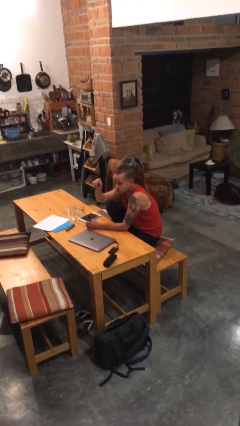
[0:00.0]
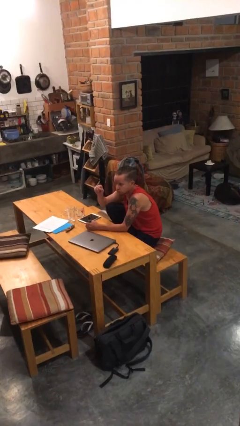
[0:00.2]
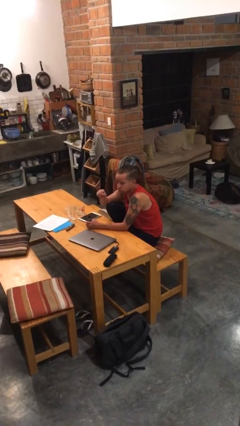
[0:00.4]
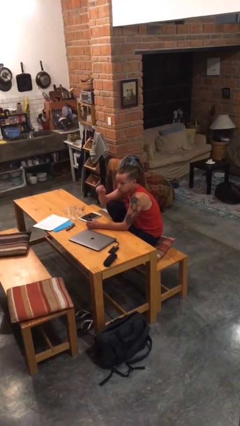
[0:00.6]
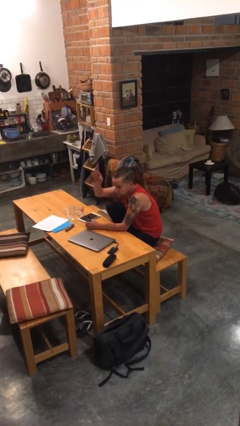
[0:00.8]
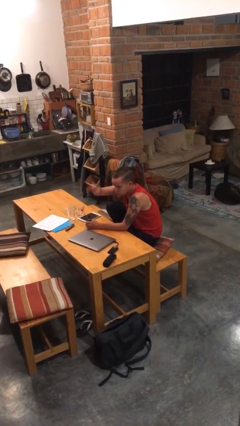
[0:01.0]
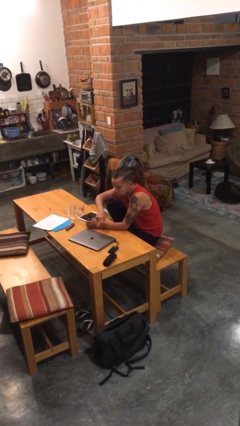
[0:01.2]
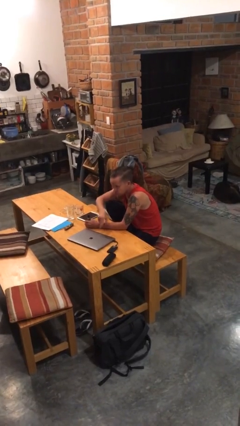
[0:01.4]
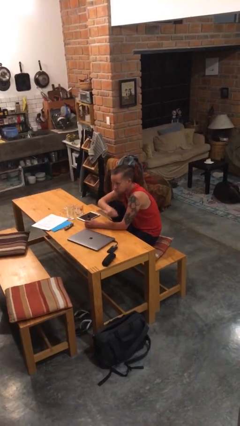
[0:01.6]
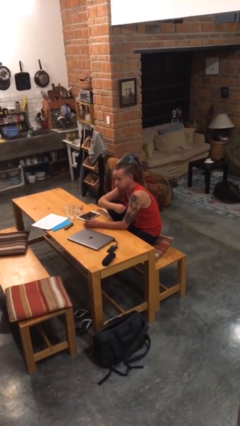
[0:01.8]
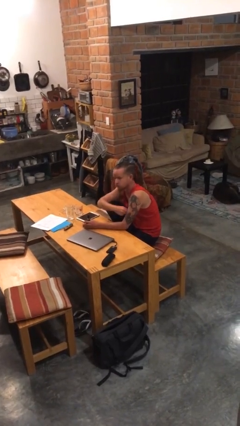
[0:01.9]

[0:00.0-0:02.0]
person gestures swipe down

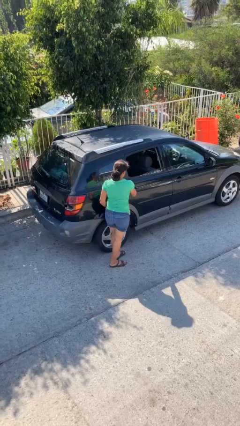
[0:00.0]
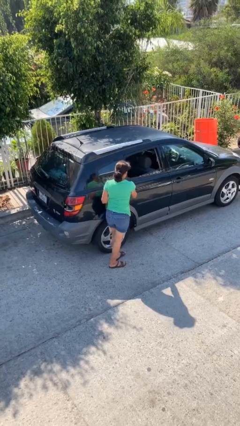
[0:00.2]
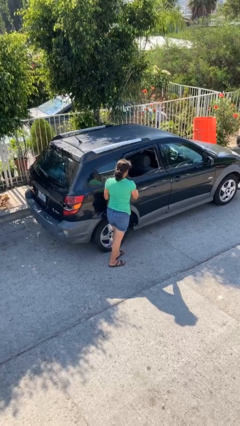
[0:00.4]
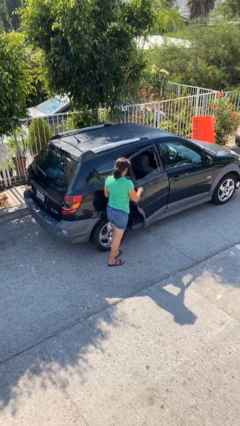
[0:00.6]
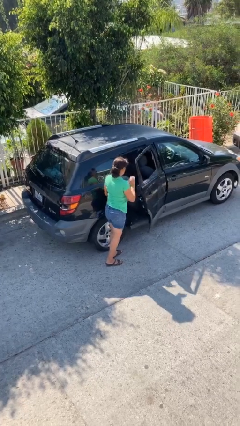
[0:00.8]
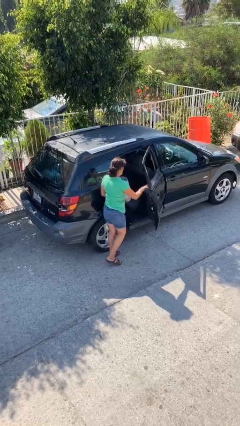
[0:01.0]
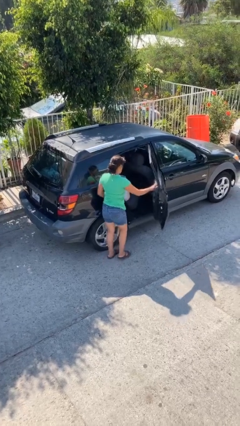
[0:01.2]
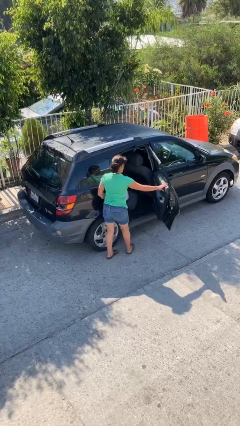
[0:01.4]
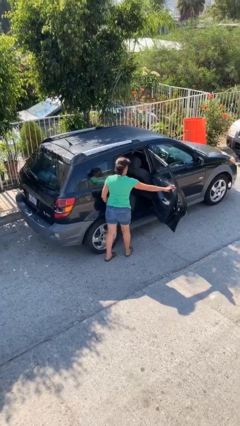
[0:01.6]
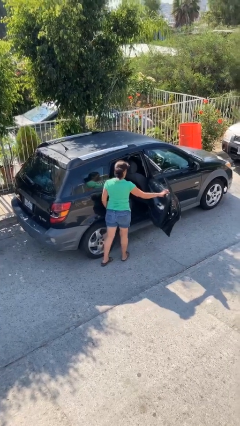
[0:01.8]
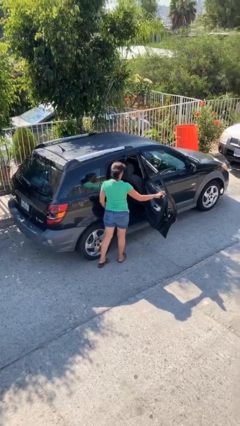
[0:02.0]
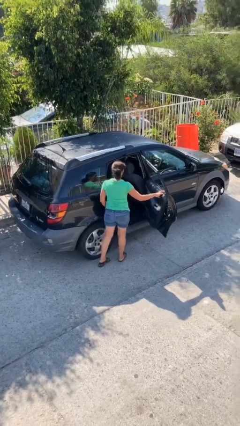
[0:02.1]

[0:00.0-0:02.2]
person opens car door

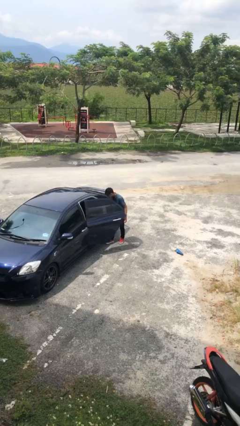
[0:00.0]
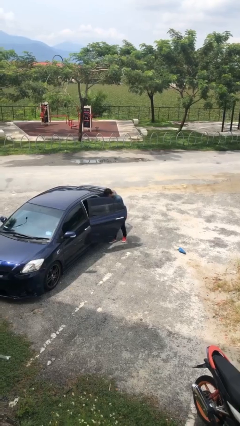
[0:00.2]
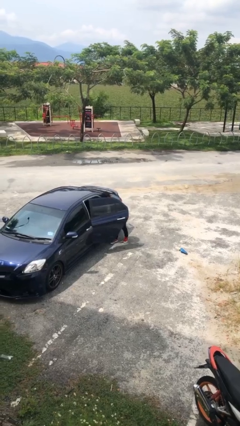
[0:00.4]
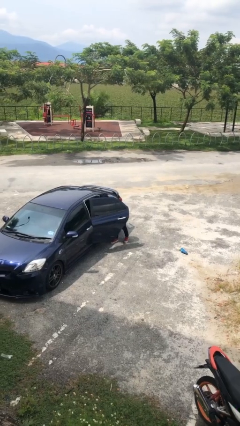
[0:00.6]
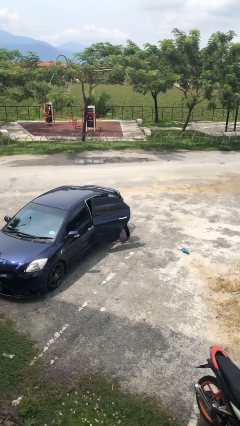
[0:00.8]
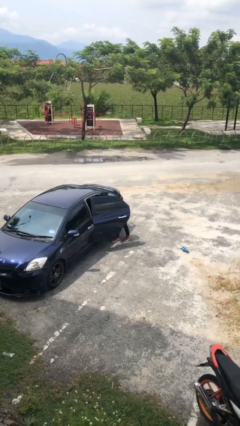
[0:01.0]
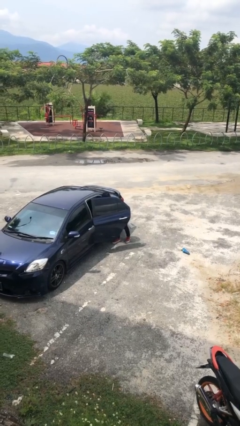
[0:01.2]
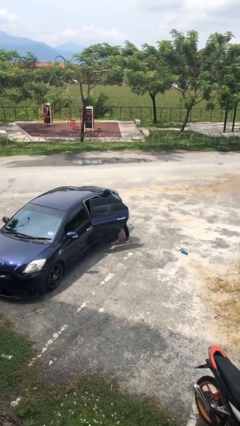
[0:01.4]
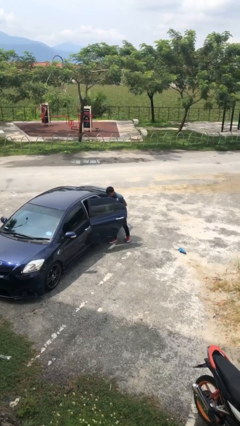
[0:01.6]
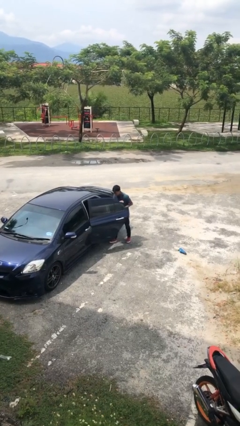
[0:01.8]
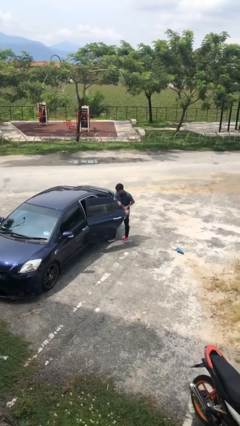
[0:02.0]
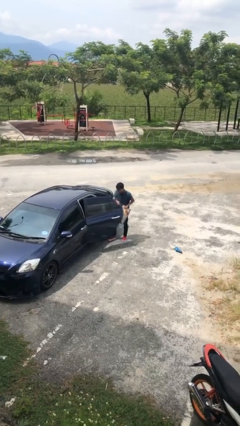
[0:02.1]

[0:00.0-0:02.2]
person unloads car

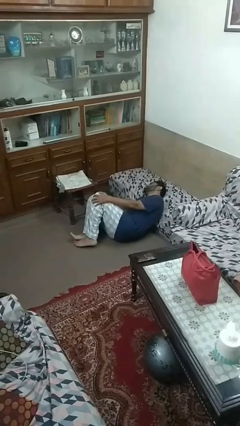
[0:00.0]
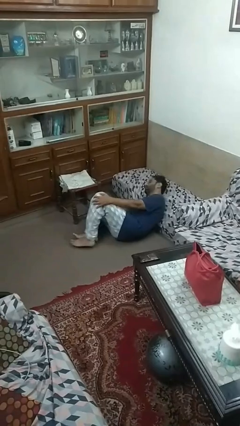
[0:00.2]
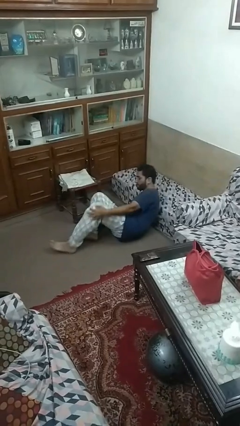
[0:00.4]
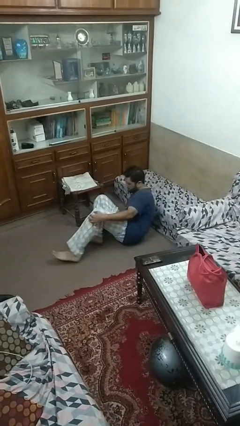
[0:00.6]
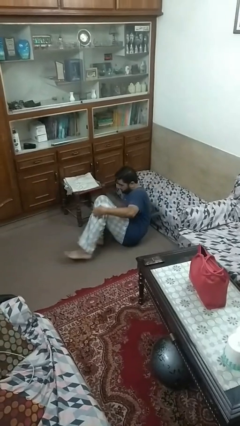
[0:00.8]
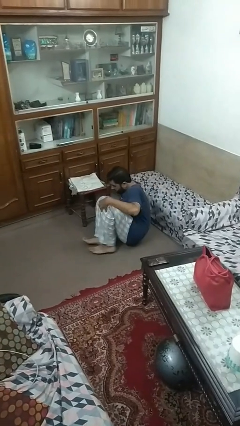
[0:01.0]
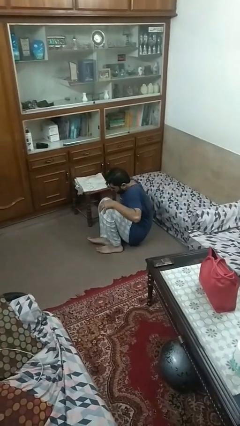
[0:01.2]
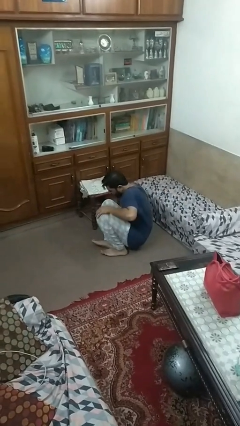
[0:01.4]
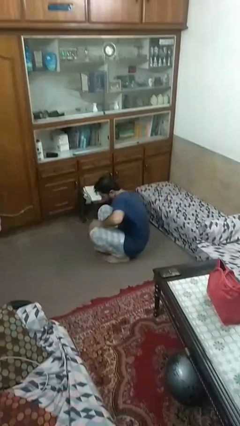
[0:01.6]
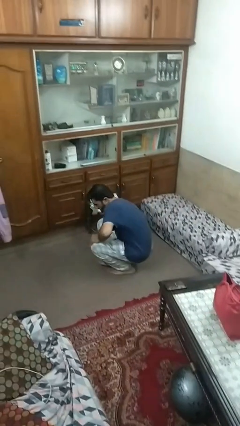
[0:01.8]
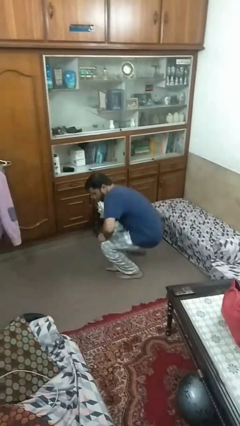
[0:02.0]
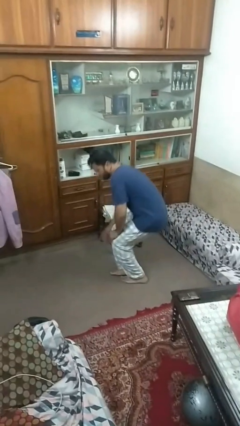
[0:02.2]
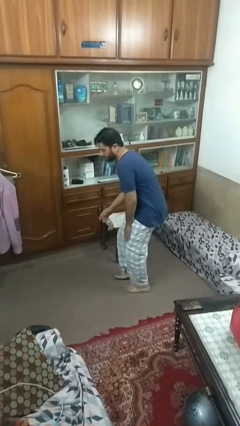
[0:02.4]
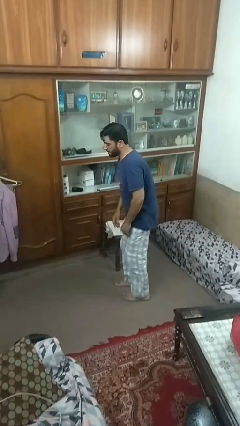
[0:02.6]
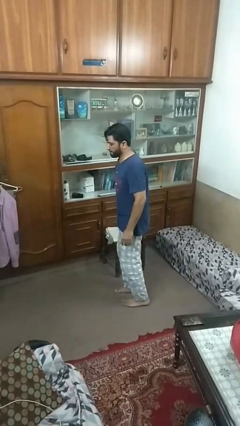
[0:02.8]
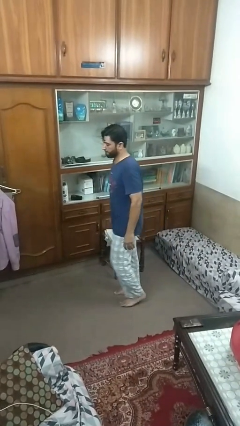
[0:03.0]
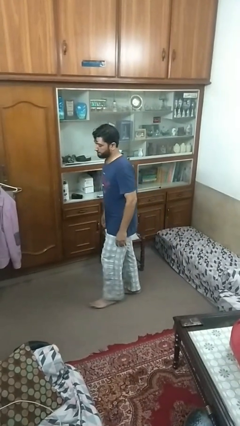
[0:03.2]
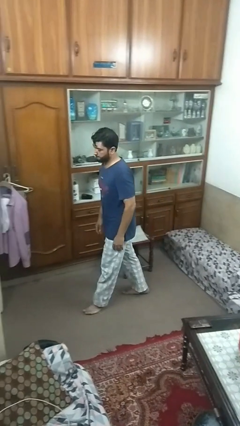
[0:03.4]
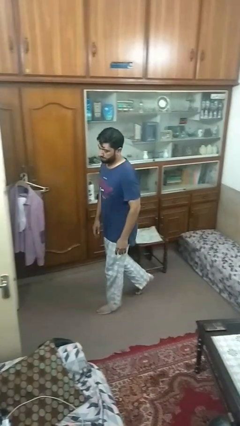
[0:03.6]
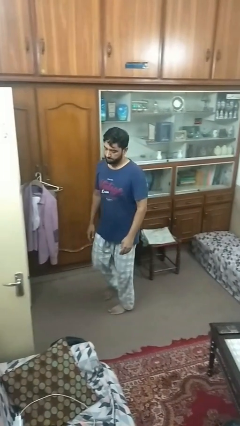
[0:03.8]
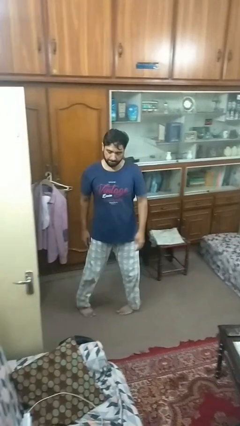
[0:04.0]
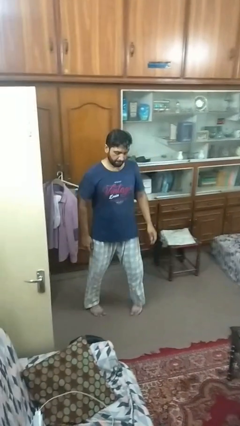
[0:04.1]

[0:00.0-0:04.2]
person stands up from floor

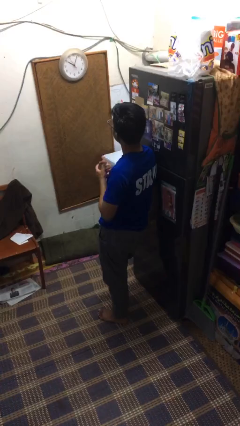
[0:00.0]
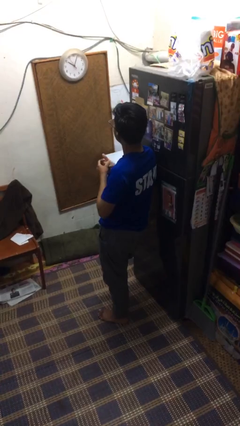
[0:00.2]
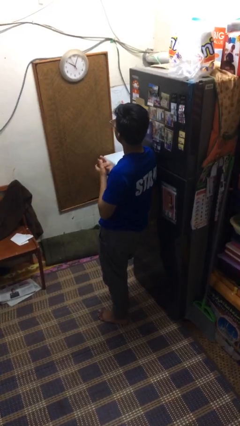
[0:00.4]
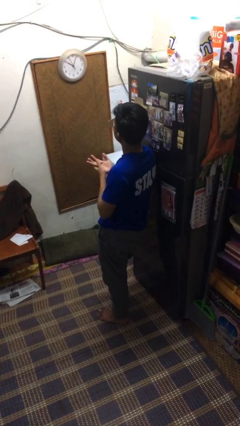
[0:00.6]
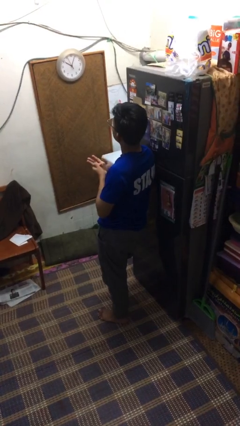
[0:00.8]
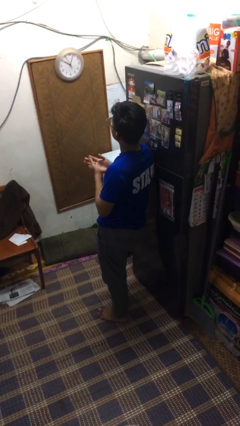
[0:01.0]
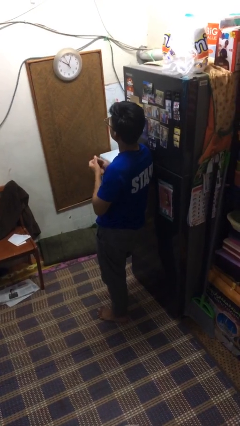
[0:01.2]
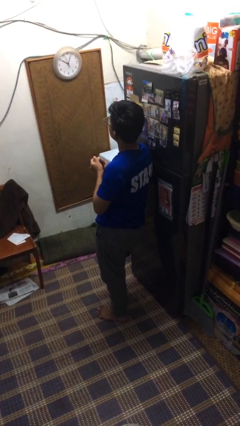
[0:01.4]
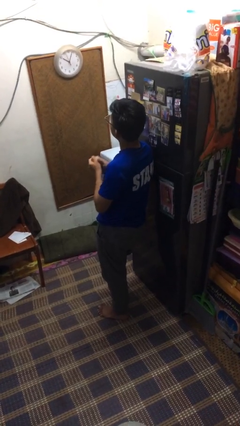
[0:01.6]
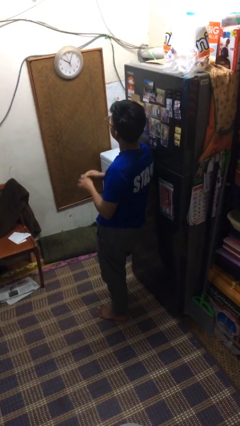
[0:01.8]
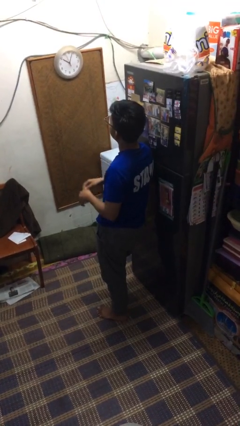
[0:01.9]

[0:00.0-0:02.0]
person cracks knuckles

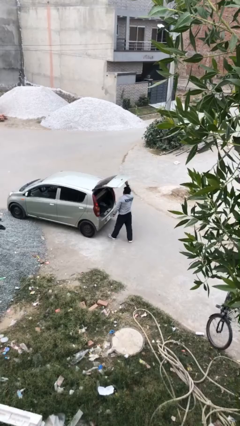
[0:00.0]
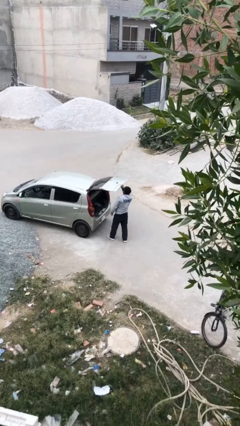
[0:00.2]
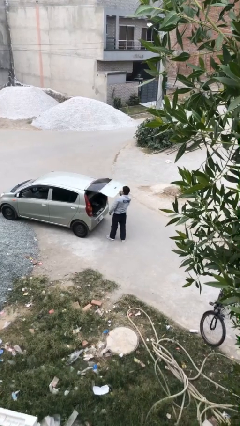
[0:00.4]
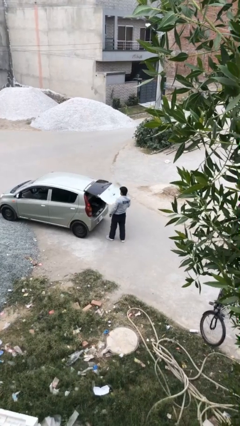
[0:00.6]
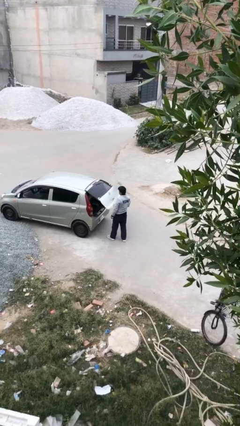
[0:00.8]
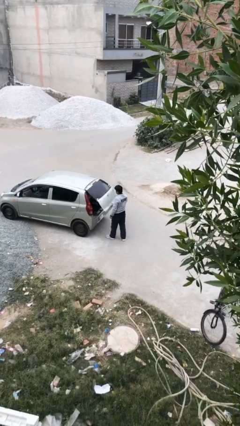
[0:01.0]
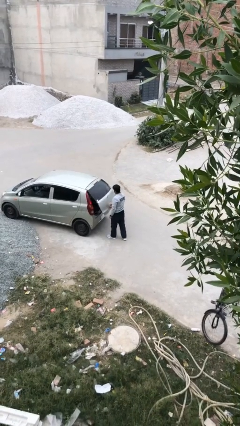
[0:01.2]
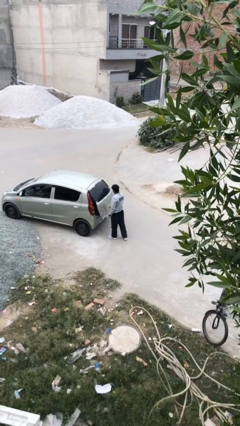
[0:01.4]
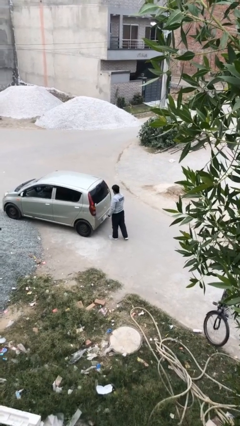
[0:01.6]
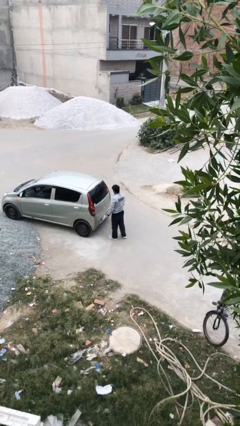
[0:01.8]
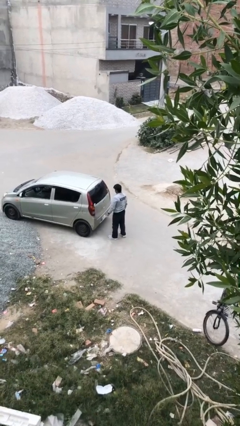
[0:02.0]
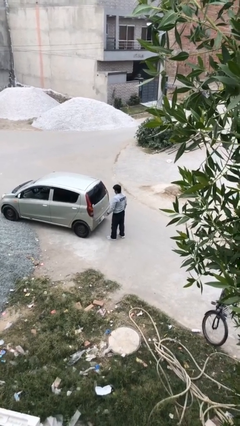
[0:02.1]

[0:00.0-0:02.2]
person closes car trunk

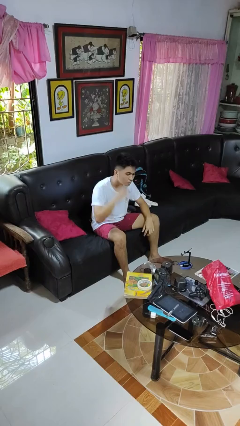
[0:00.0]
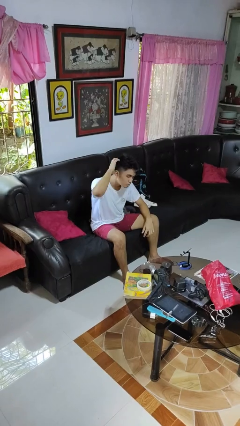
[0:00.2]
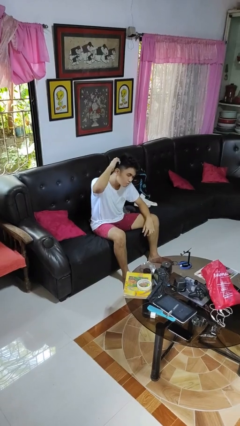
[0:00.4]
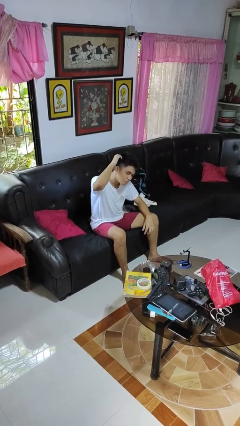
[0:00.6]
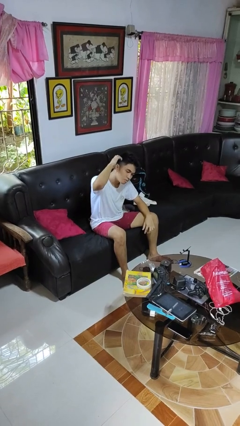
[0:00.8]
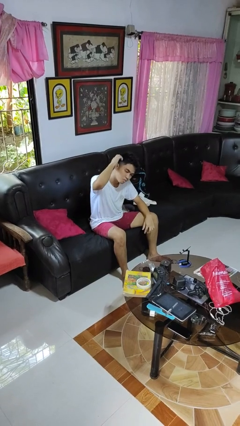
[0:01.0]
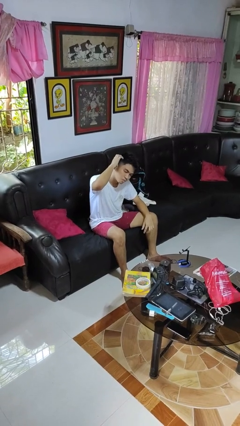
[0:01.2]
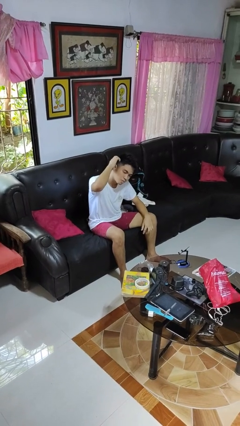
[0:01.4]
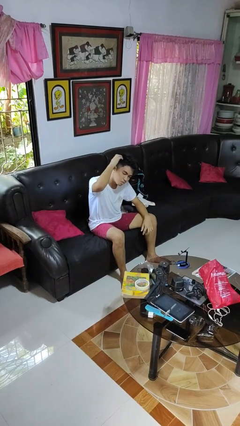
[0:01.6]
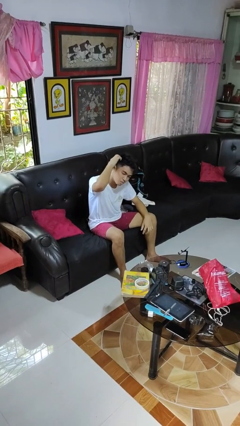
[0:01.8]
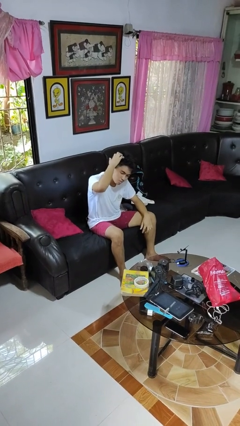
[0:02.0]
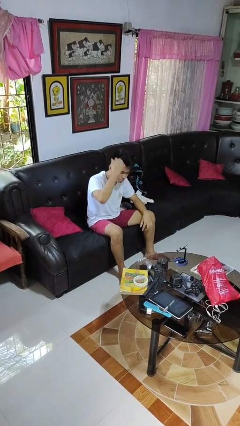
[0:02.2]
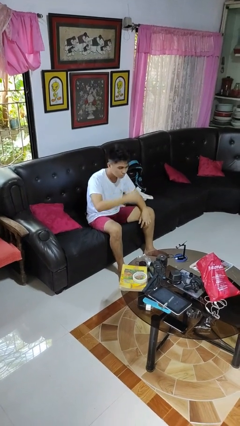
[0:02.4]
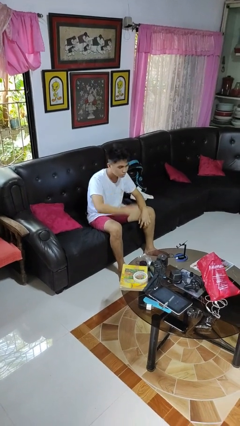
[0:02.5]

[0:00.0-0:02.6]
person scratches face
